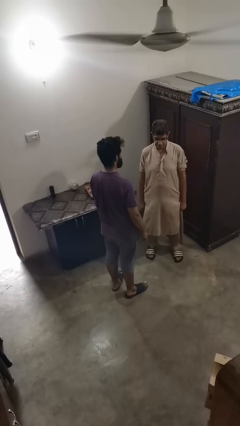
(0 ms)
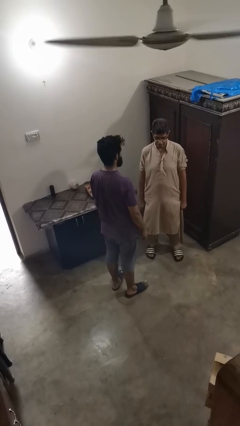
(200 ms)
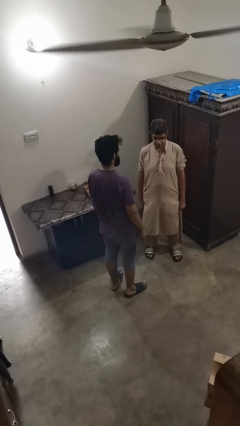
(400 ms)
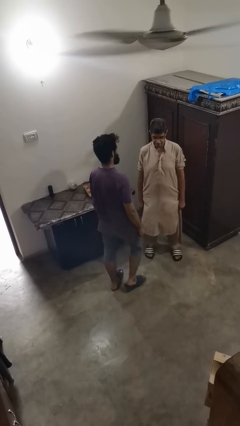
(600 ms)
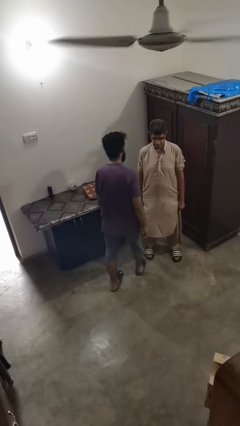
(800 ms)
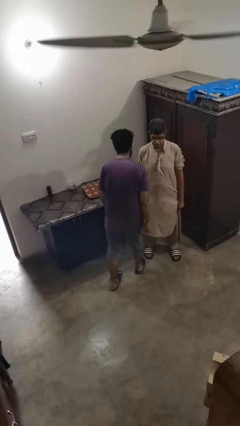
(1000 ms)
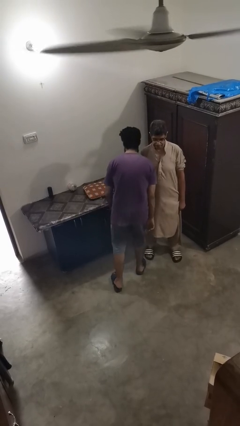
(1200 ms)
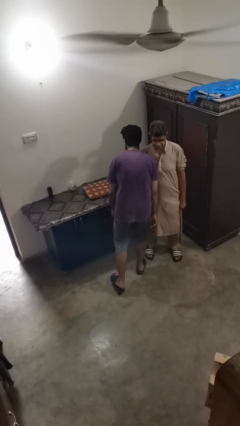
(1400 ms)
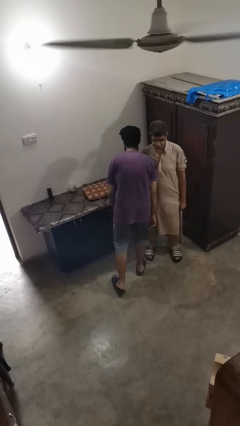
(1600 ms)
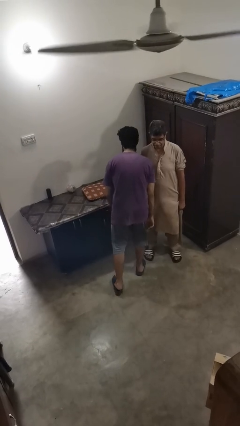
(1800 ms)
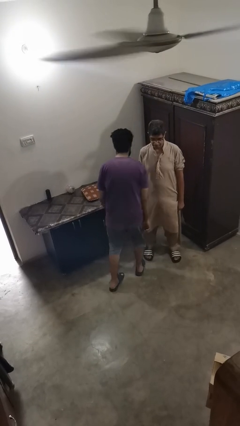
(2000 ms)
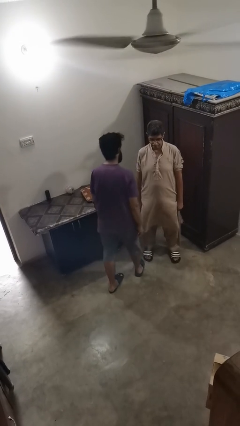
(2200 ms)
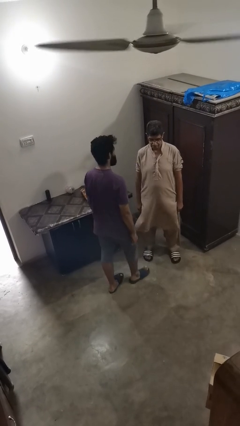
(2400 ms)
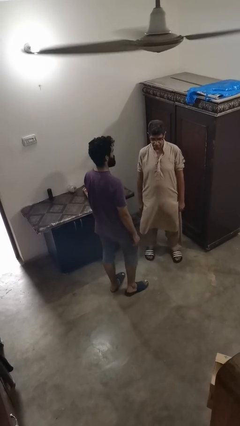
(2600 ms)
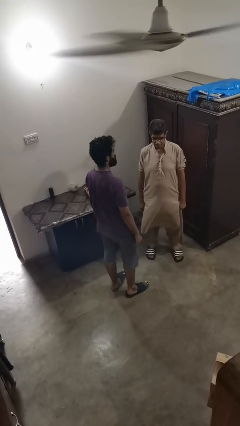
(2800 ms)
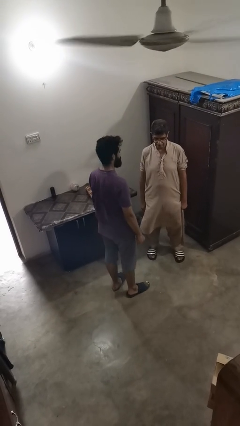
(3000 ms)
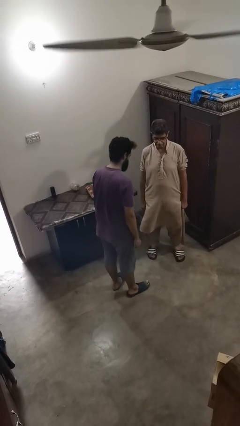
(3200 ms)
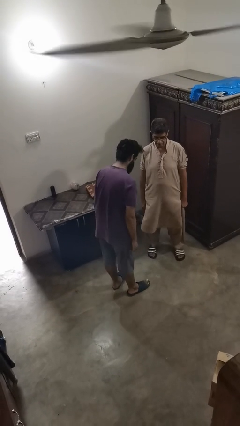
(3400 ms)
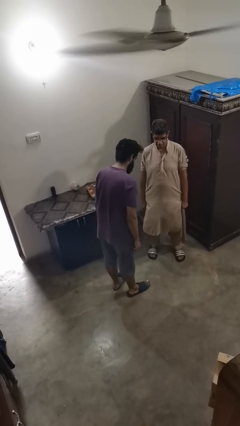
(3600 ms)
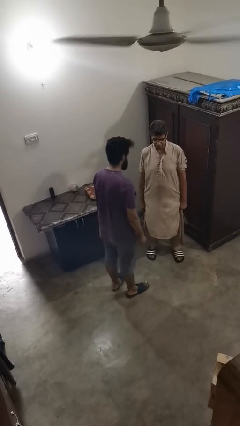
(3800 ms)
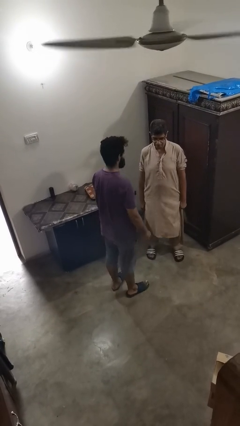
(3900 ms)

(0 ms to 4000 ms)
person bumps into person

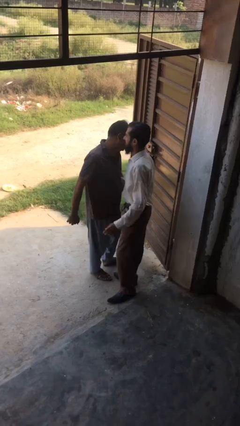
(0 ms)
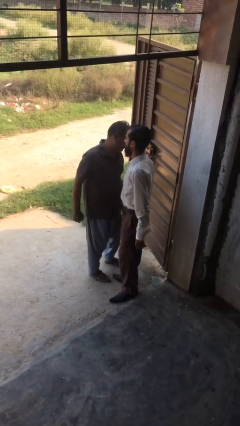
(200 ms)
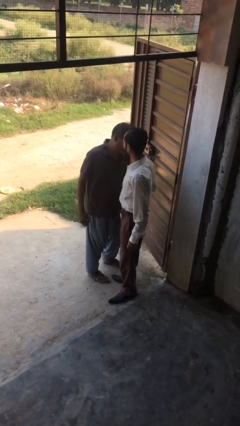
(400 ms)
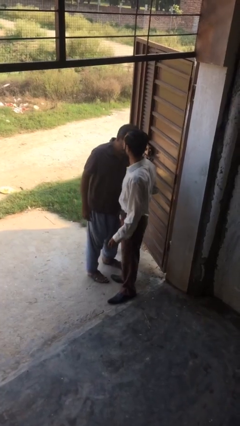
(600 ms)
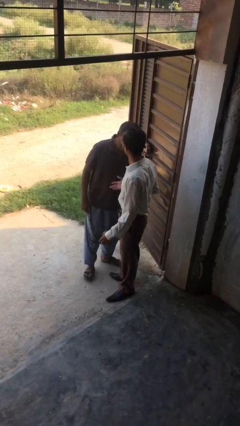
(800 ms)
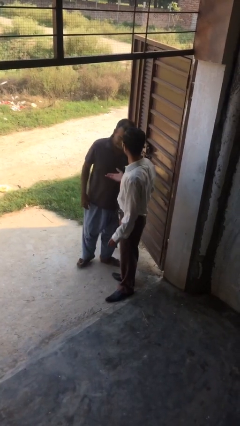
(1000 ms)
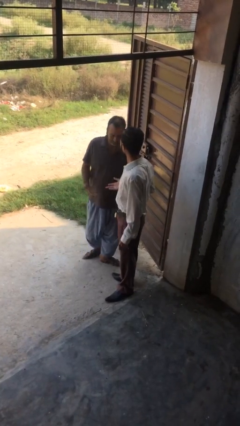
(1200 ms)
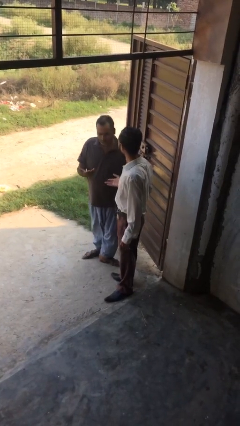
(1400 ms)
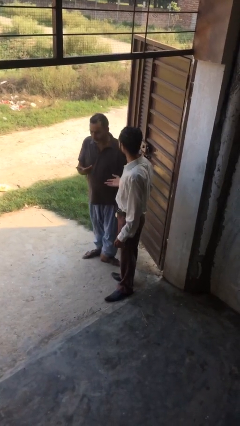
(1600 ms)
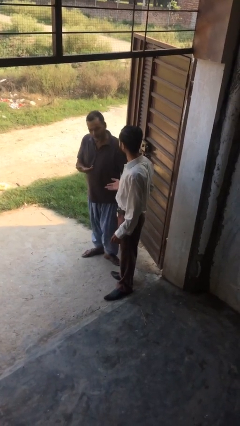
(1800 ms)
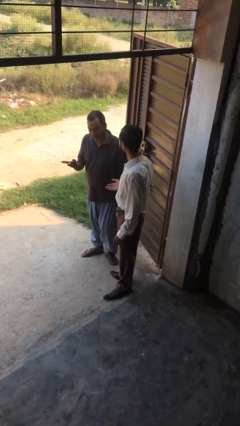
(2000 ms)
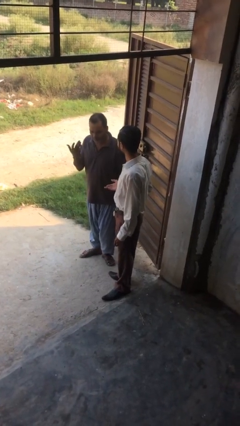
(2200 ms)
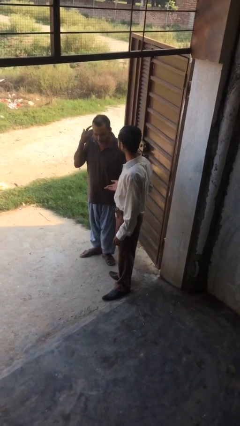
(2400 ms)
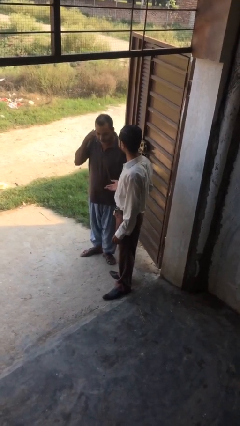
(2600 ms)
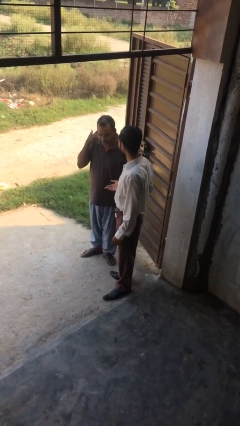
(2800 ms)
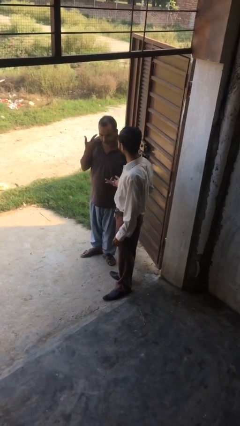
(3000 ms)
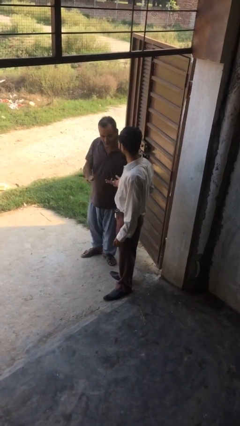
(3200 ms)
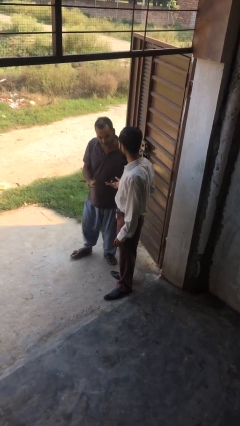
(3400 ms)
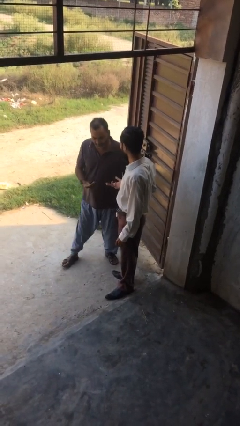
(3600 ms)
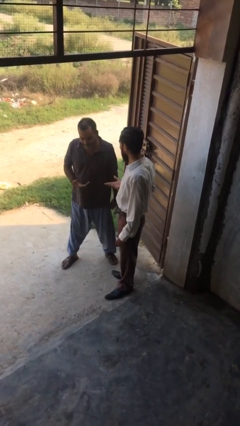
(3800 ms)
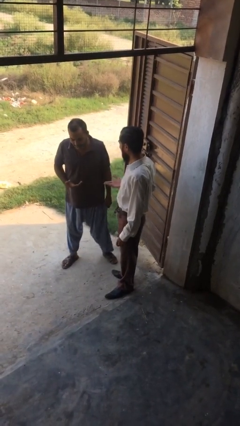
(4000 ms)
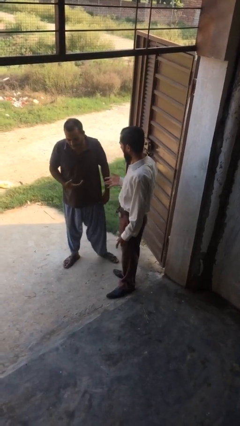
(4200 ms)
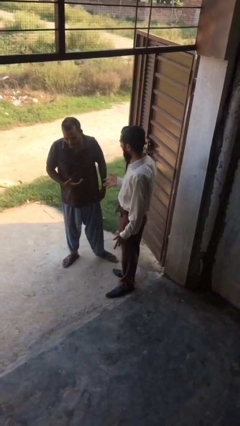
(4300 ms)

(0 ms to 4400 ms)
person talks to person

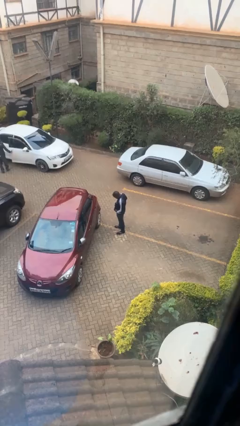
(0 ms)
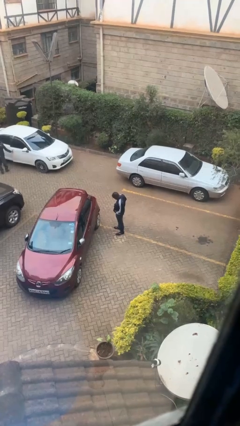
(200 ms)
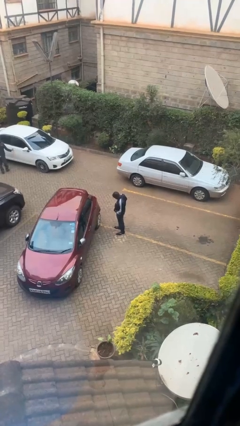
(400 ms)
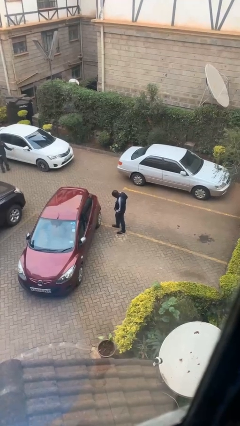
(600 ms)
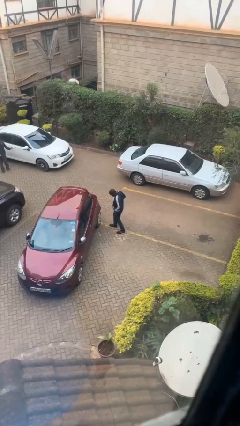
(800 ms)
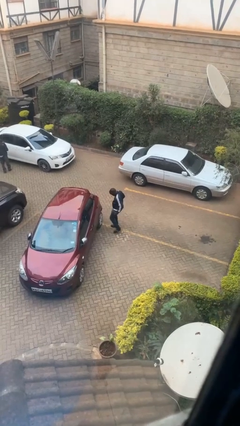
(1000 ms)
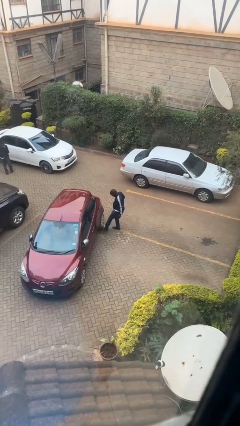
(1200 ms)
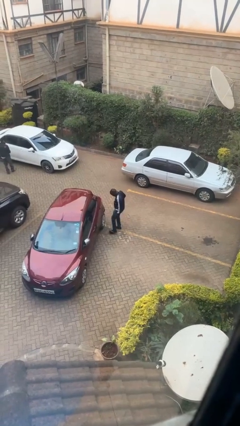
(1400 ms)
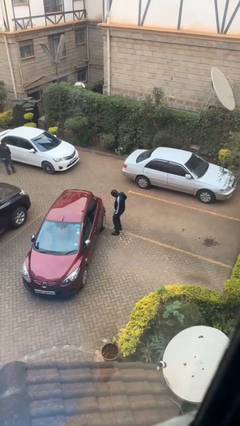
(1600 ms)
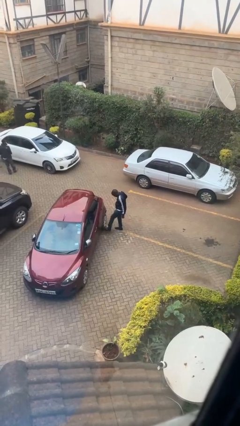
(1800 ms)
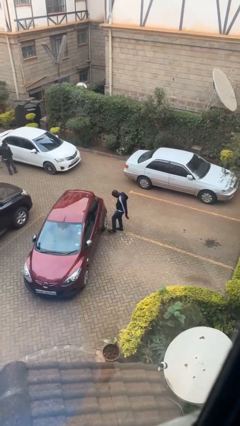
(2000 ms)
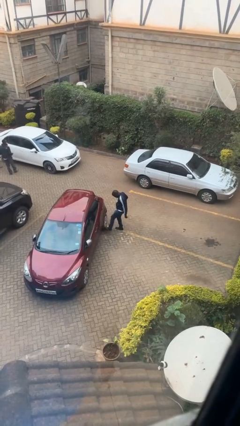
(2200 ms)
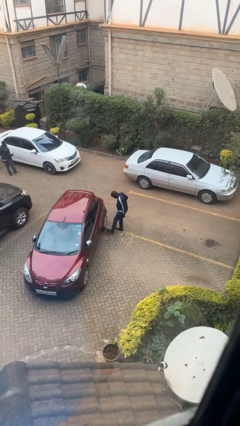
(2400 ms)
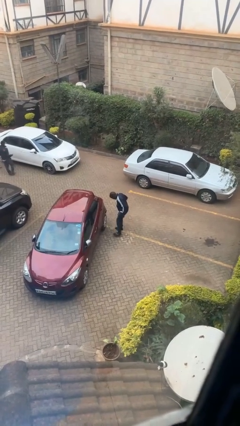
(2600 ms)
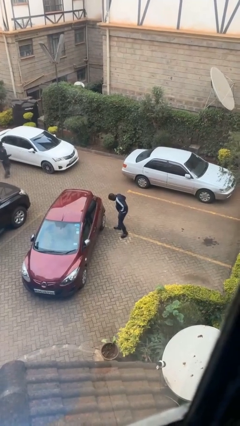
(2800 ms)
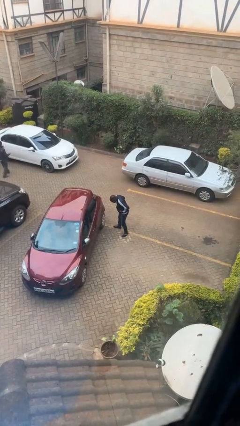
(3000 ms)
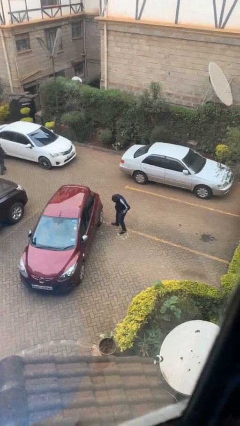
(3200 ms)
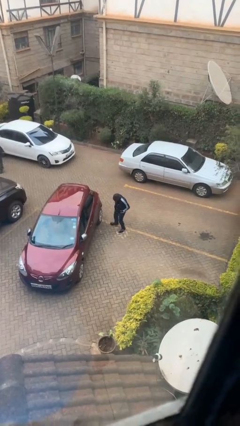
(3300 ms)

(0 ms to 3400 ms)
person kicks car tires

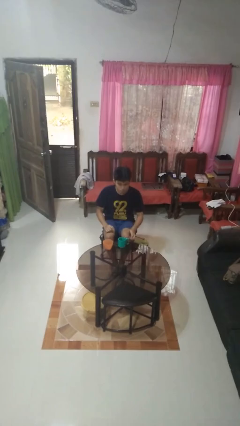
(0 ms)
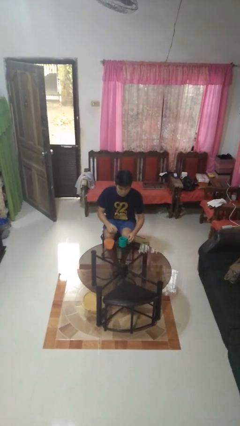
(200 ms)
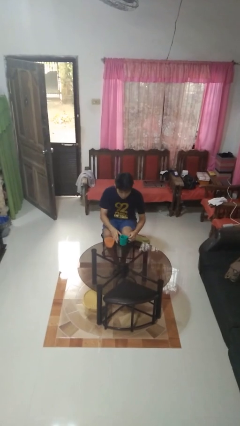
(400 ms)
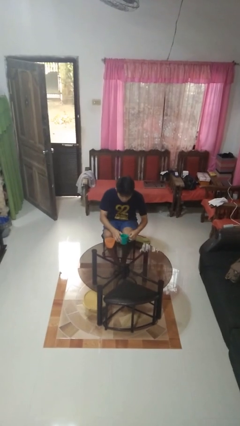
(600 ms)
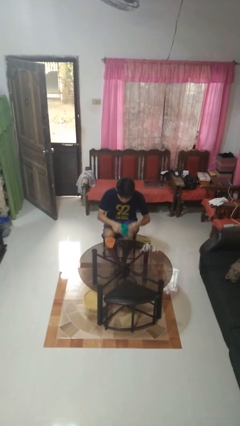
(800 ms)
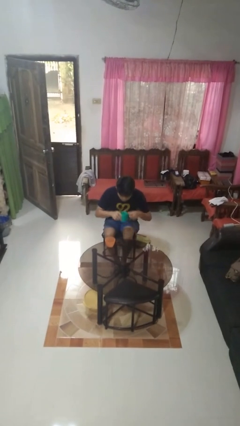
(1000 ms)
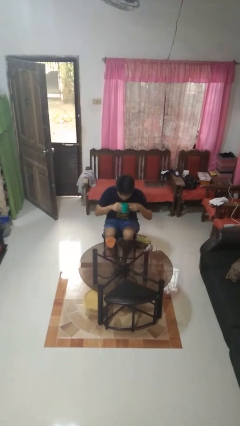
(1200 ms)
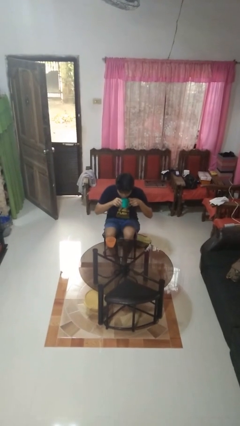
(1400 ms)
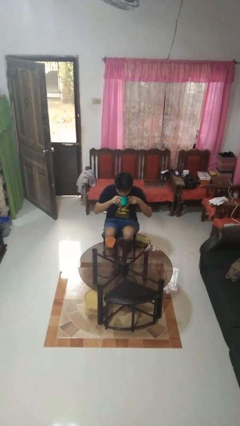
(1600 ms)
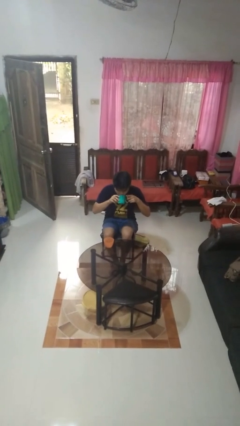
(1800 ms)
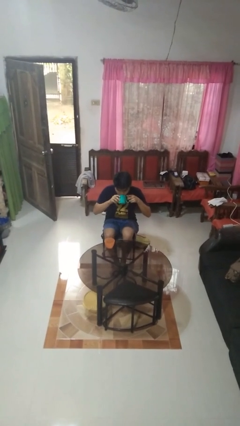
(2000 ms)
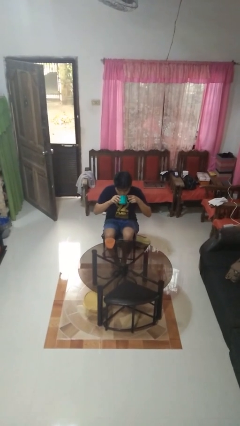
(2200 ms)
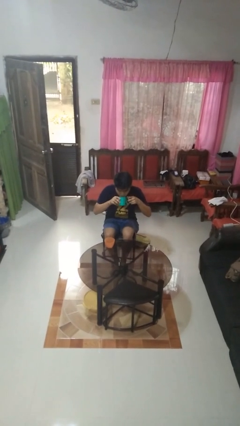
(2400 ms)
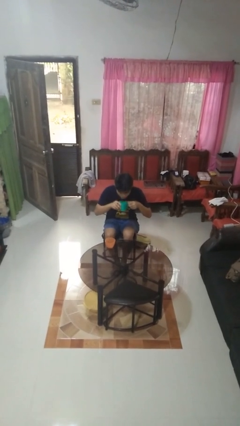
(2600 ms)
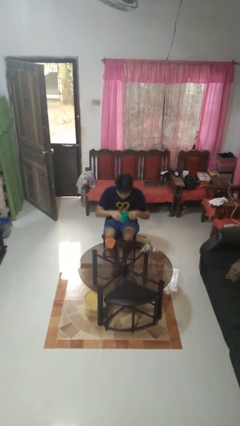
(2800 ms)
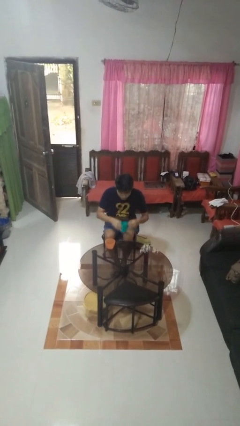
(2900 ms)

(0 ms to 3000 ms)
person drinks from cup

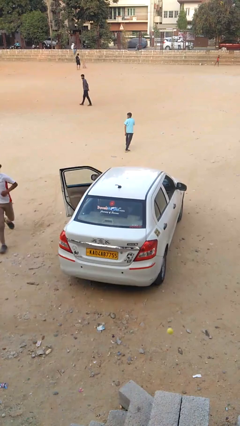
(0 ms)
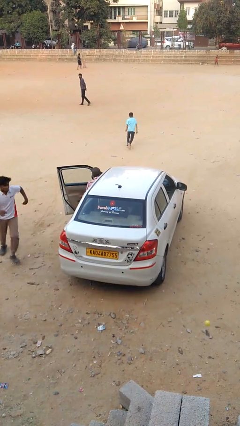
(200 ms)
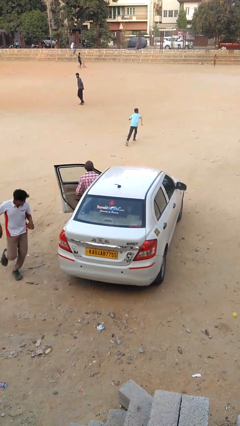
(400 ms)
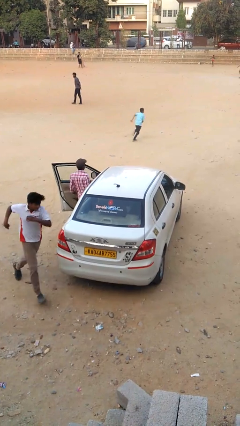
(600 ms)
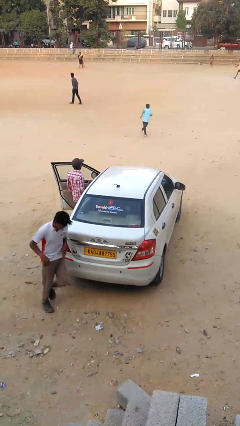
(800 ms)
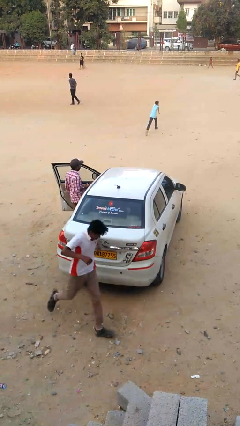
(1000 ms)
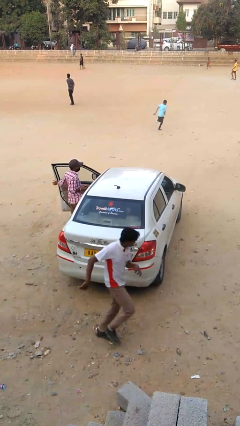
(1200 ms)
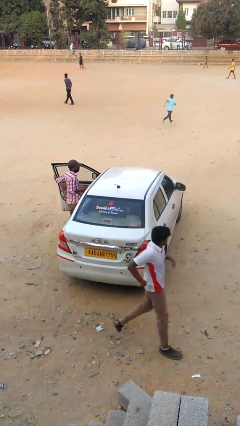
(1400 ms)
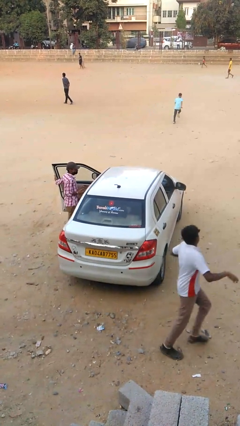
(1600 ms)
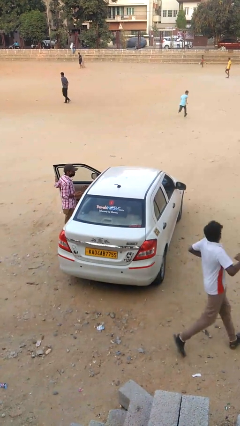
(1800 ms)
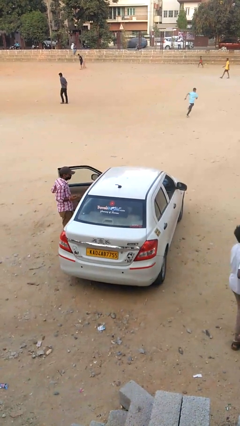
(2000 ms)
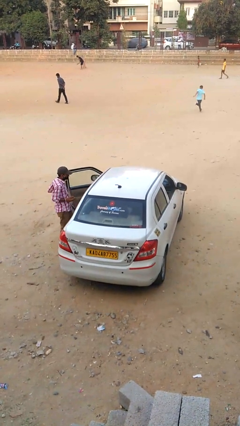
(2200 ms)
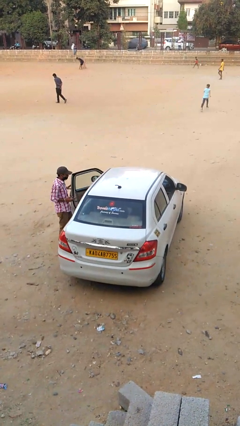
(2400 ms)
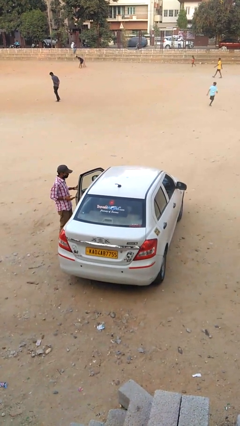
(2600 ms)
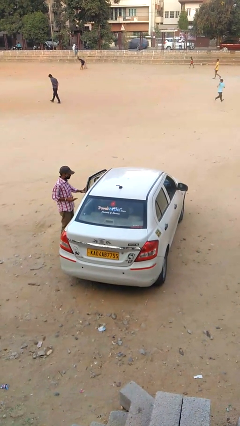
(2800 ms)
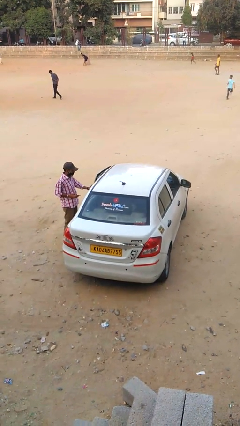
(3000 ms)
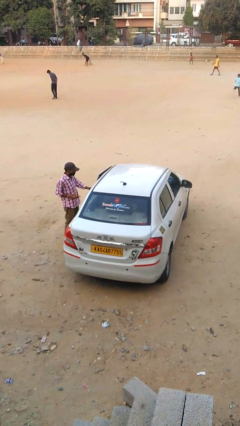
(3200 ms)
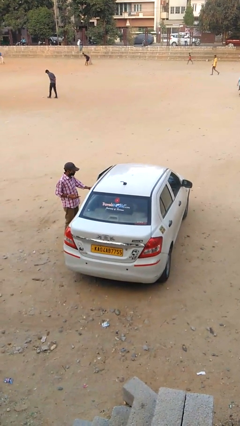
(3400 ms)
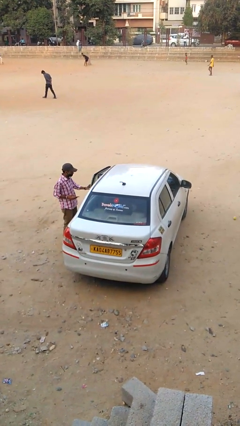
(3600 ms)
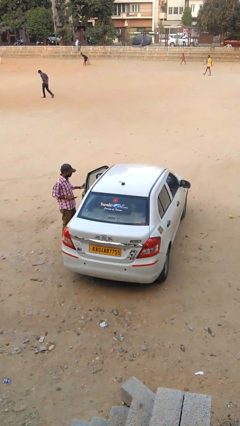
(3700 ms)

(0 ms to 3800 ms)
car drops off person
